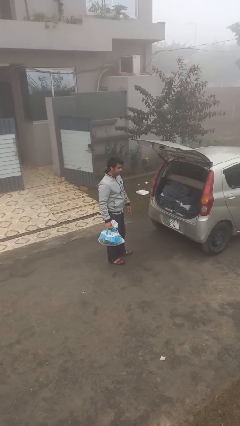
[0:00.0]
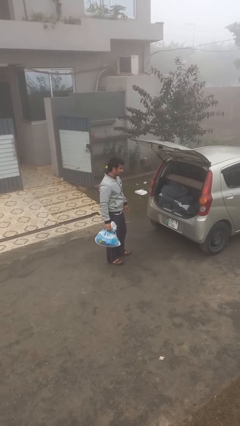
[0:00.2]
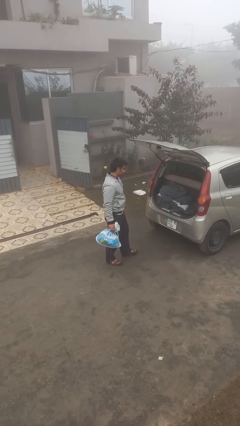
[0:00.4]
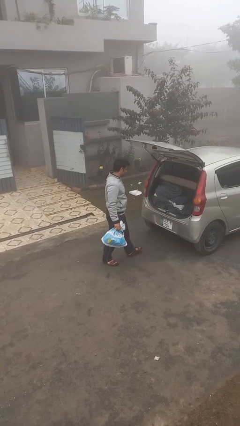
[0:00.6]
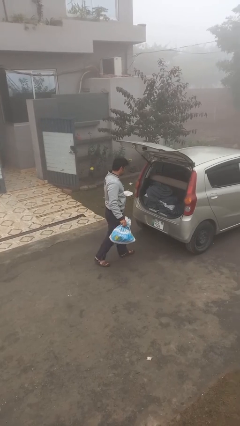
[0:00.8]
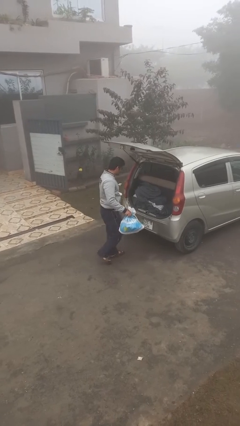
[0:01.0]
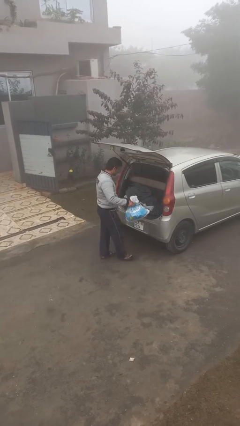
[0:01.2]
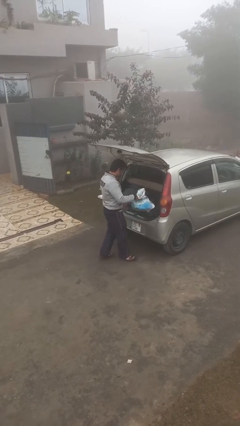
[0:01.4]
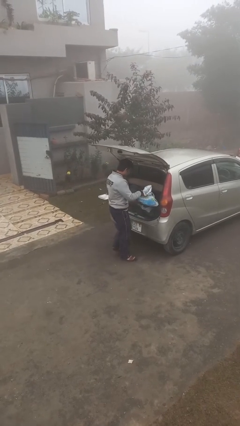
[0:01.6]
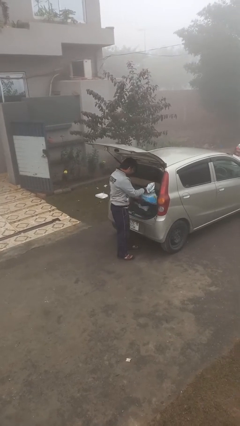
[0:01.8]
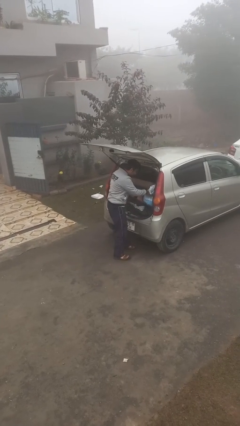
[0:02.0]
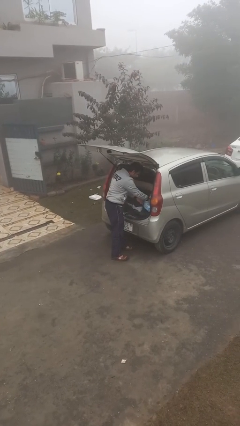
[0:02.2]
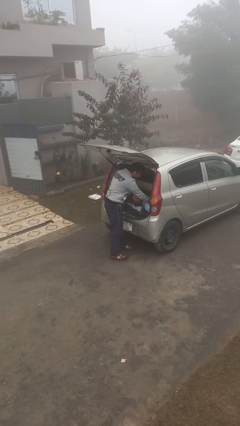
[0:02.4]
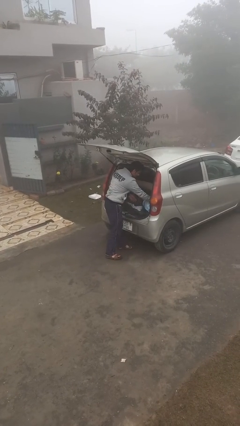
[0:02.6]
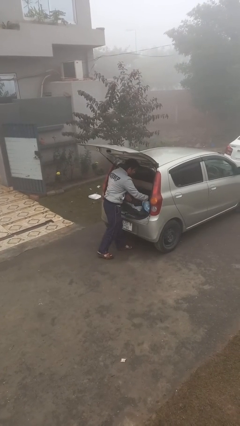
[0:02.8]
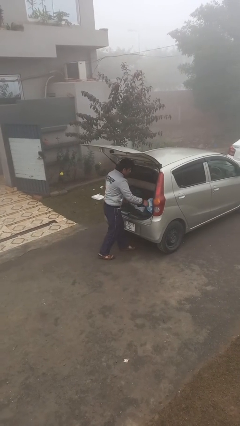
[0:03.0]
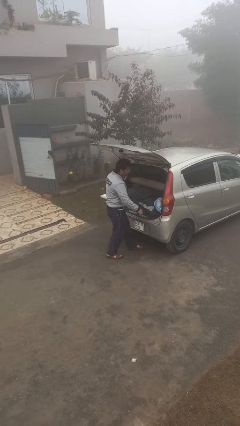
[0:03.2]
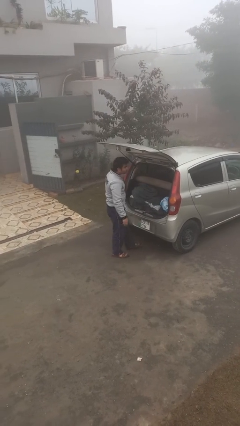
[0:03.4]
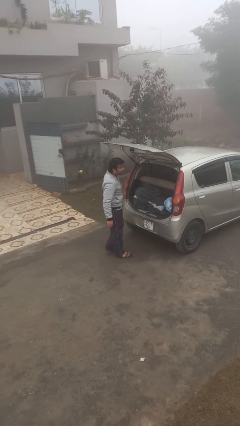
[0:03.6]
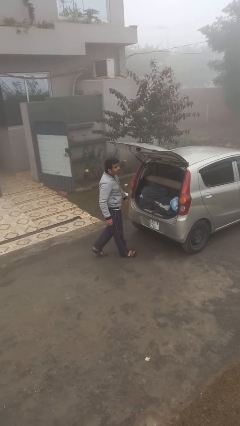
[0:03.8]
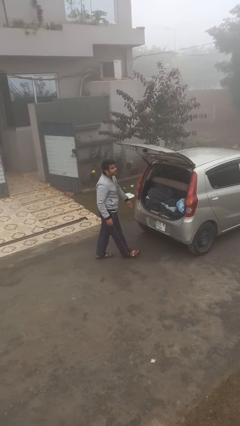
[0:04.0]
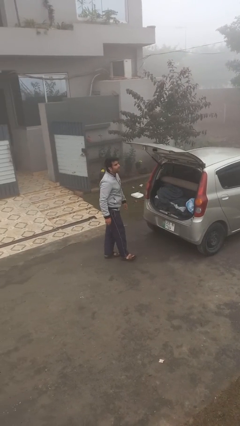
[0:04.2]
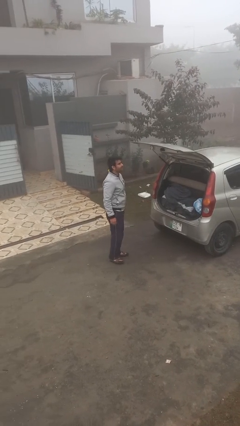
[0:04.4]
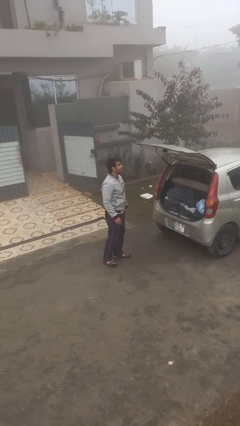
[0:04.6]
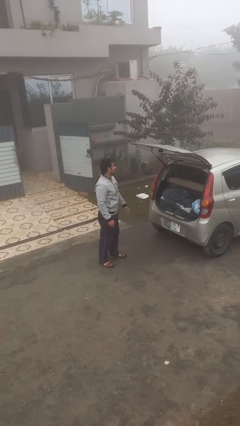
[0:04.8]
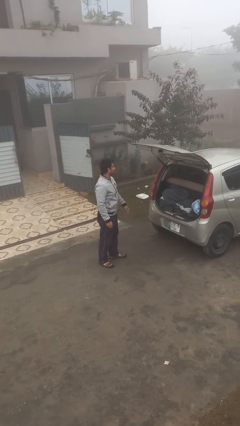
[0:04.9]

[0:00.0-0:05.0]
person loads car

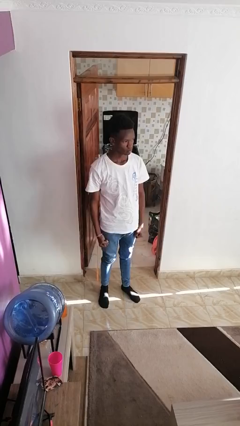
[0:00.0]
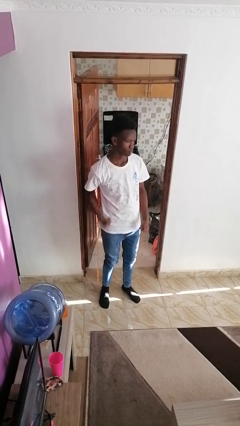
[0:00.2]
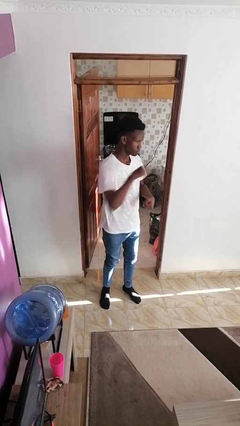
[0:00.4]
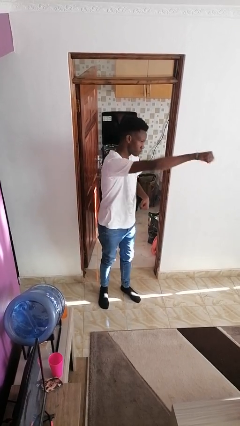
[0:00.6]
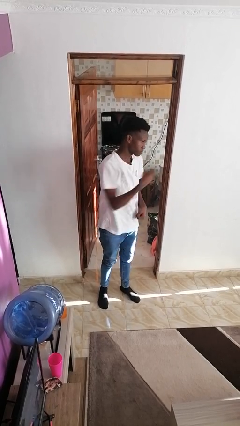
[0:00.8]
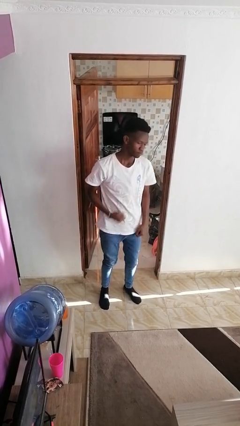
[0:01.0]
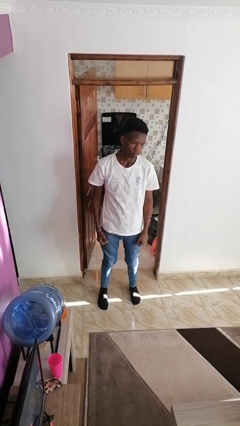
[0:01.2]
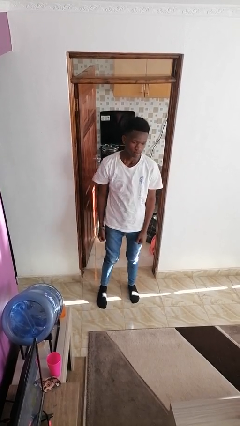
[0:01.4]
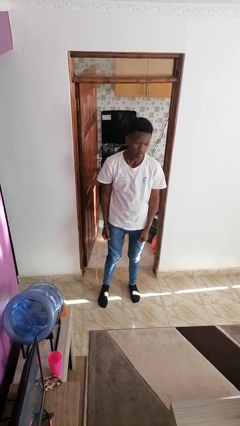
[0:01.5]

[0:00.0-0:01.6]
person punches

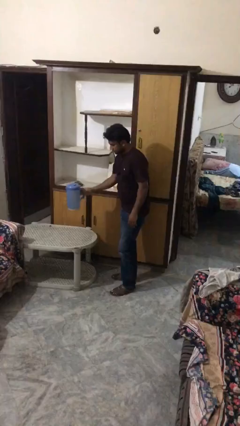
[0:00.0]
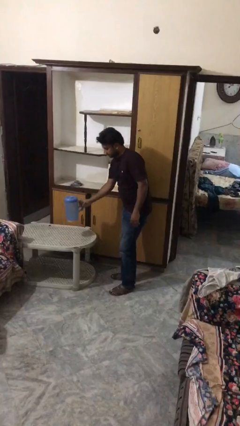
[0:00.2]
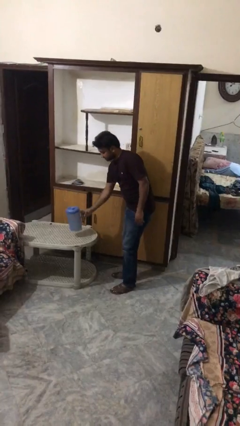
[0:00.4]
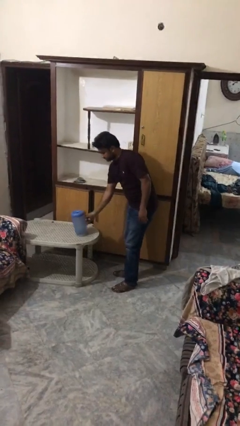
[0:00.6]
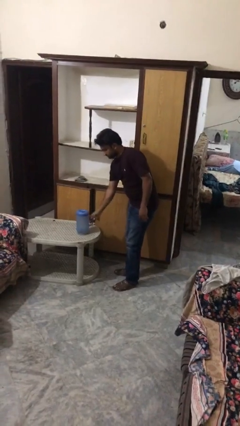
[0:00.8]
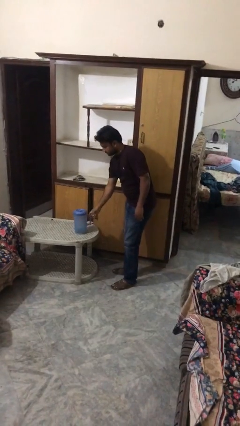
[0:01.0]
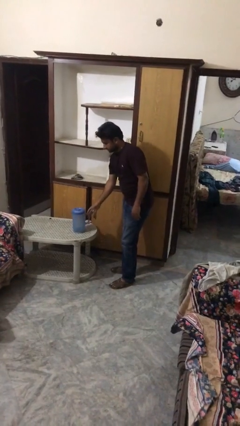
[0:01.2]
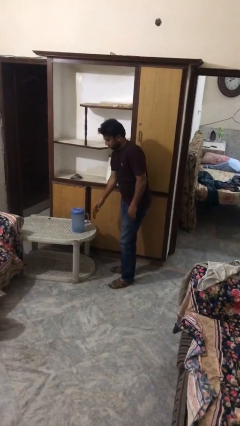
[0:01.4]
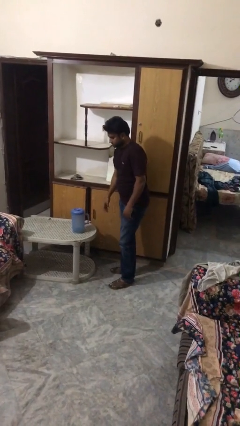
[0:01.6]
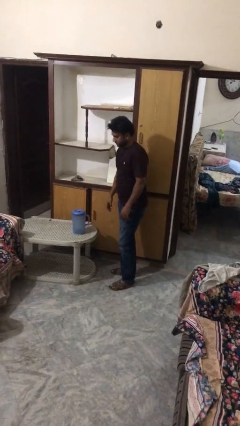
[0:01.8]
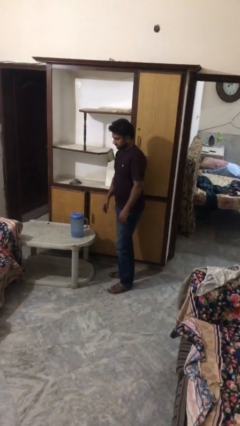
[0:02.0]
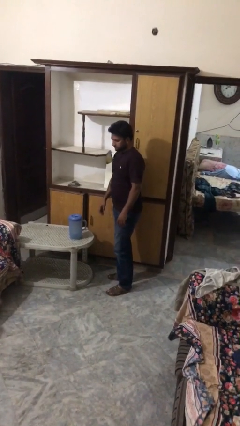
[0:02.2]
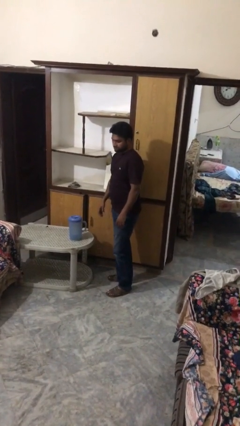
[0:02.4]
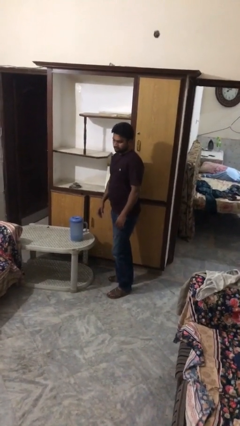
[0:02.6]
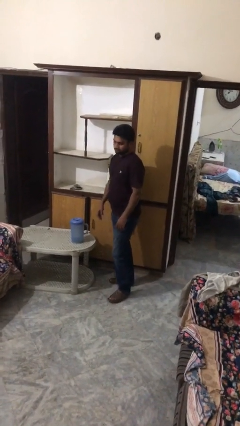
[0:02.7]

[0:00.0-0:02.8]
person puts down object on table

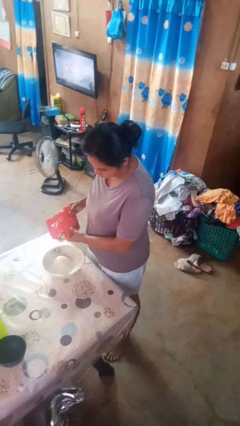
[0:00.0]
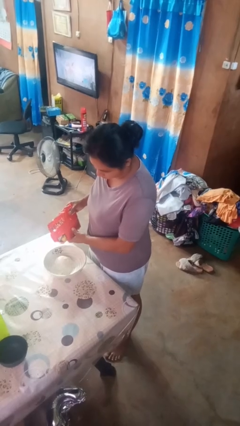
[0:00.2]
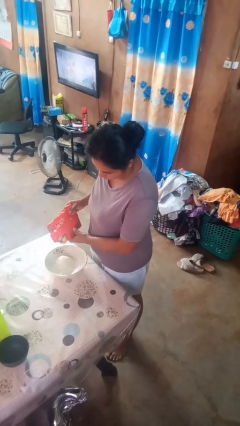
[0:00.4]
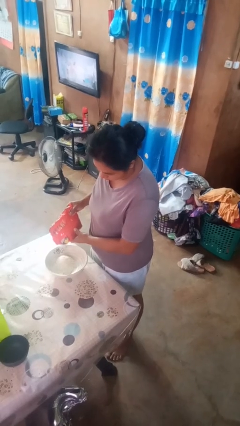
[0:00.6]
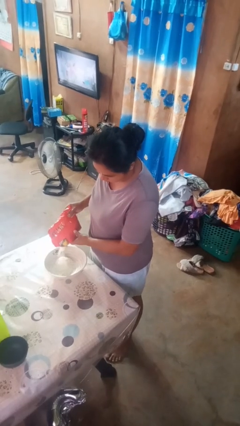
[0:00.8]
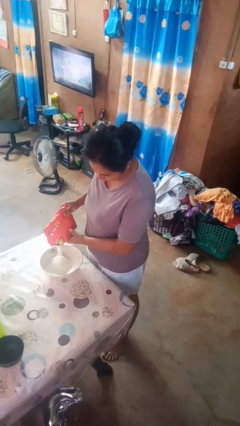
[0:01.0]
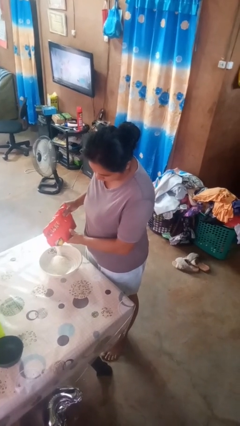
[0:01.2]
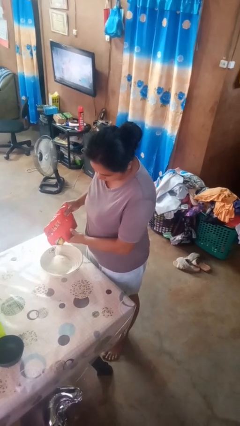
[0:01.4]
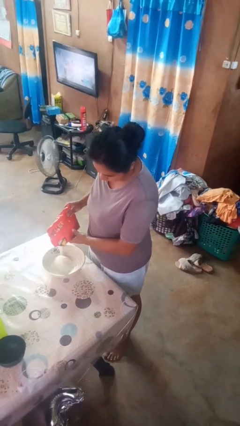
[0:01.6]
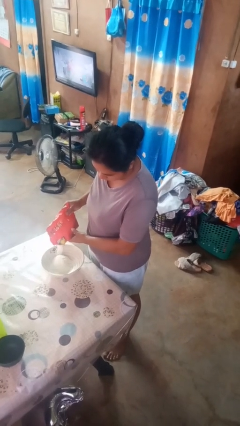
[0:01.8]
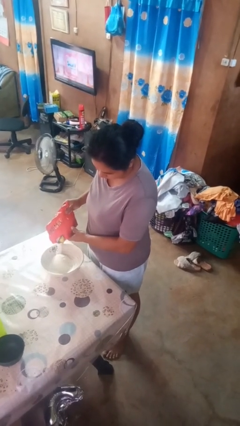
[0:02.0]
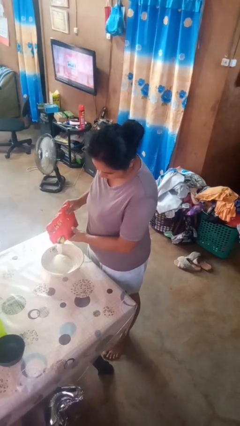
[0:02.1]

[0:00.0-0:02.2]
person pours into bowl

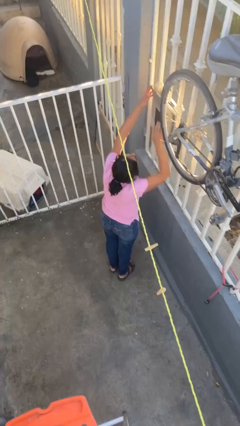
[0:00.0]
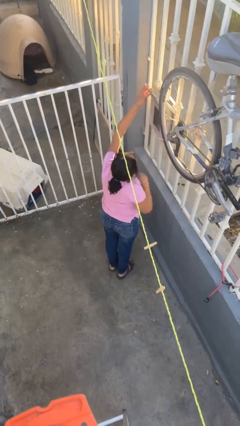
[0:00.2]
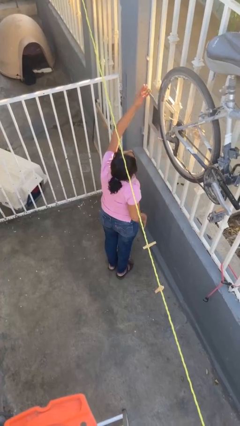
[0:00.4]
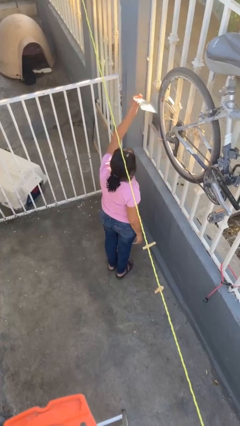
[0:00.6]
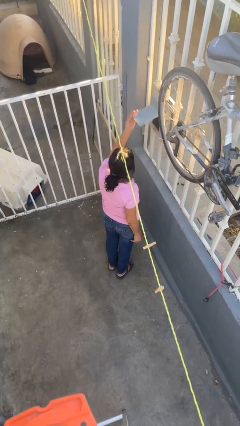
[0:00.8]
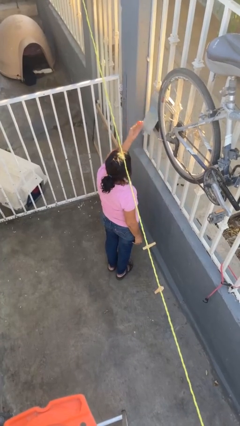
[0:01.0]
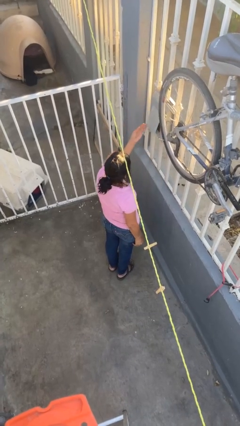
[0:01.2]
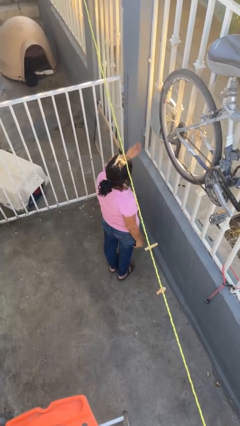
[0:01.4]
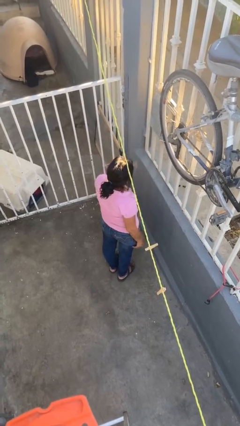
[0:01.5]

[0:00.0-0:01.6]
person closes mailbox

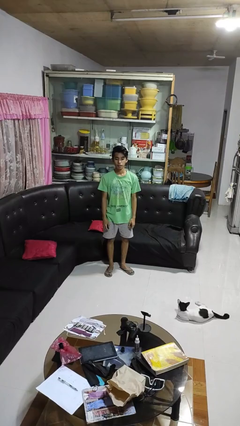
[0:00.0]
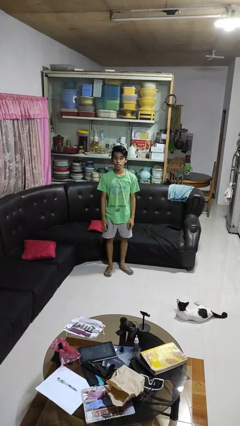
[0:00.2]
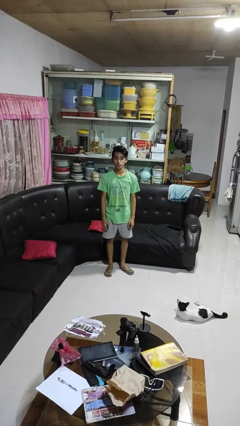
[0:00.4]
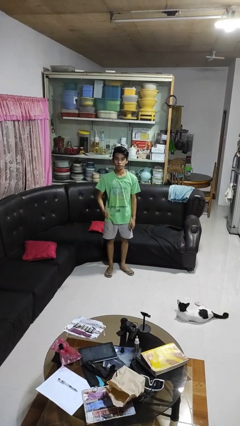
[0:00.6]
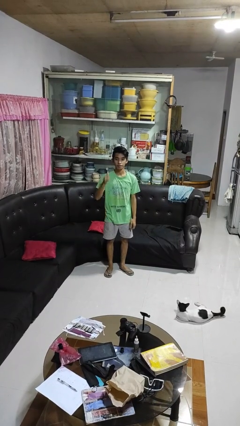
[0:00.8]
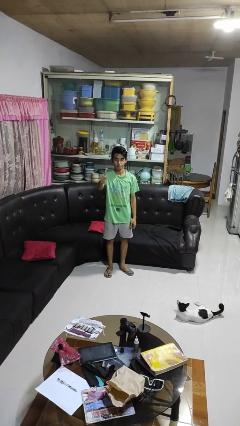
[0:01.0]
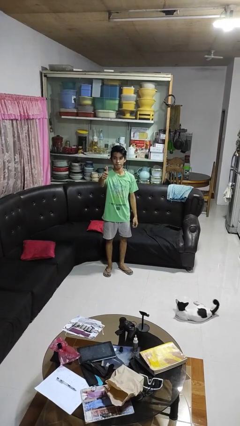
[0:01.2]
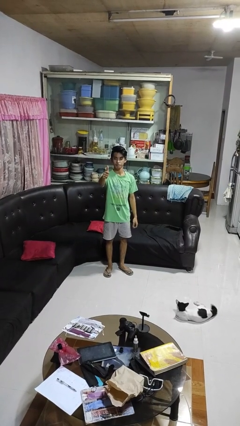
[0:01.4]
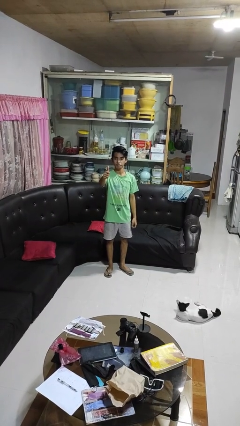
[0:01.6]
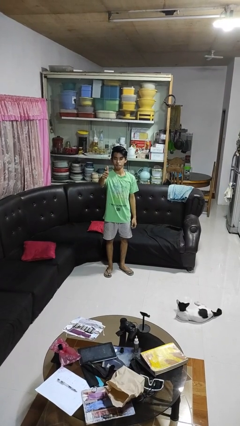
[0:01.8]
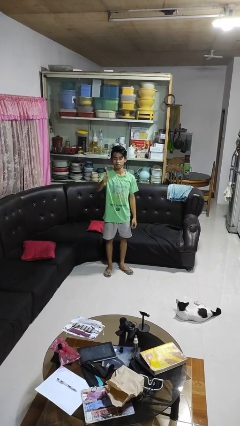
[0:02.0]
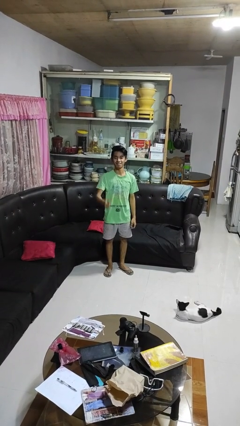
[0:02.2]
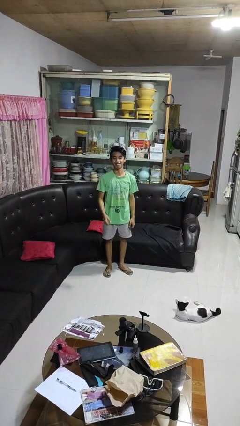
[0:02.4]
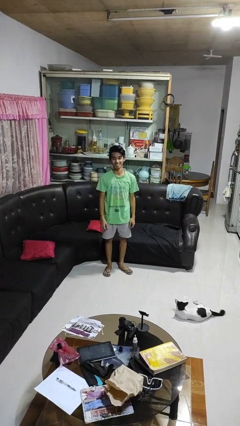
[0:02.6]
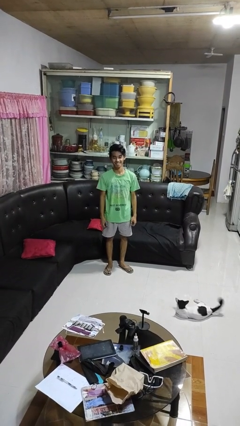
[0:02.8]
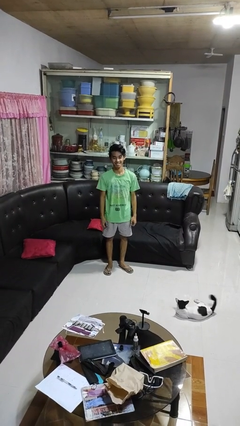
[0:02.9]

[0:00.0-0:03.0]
person gestures thumbs up

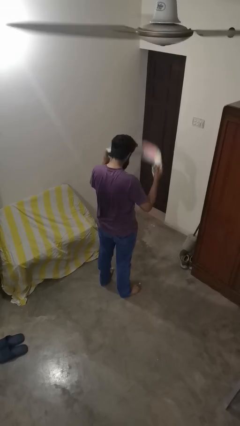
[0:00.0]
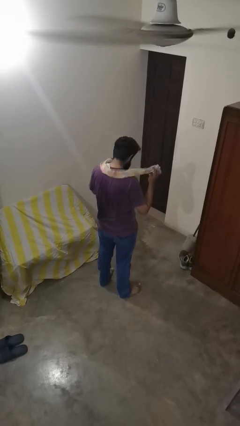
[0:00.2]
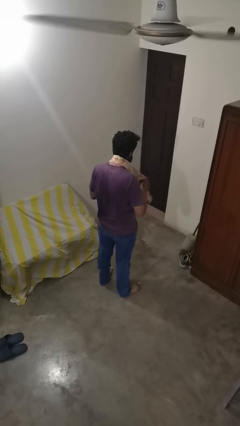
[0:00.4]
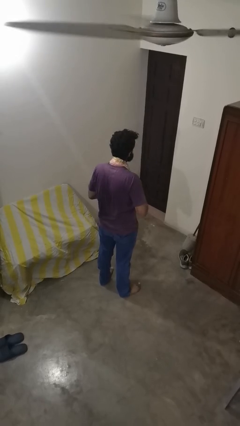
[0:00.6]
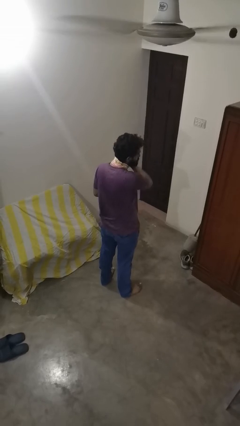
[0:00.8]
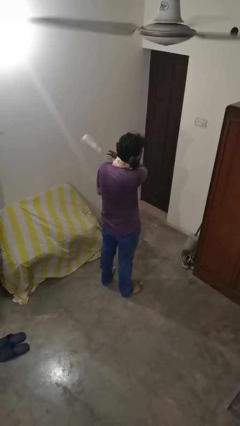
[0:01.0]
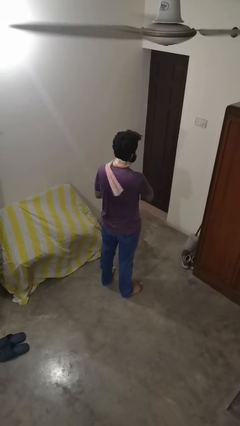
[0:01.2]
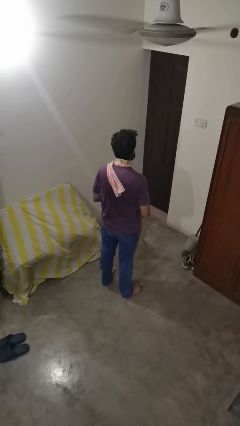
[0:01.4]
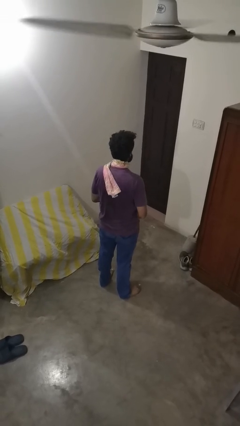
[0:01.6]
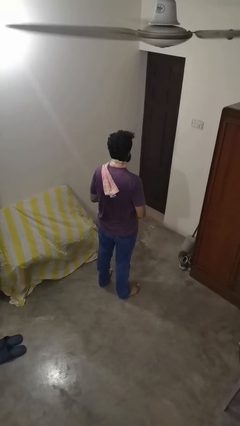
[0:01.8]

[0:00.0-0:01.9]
person puts on scarf
